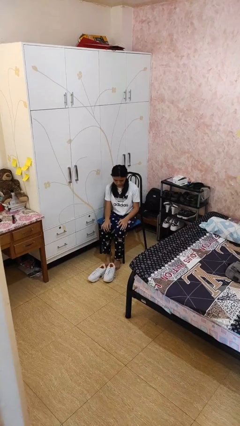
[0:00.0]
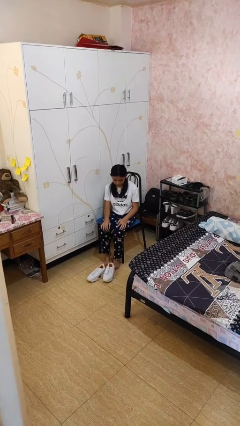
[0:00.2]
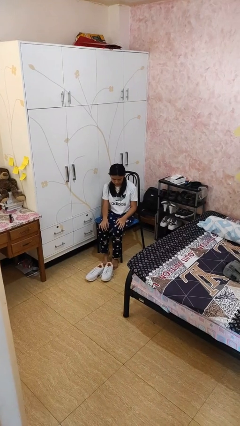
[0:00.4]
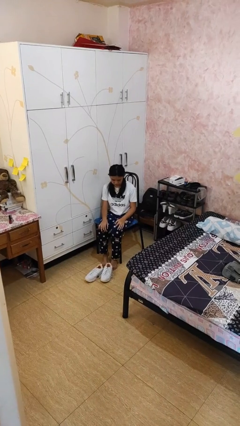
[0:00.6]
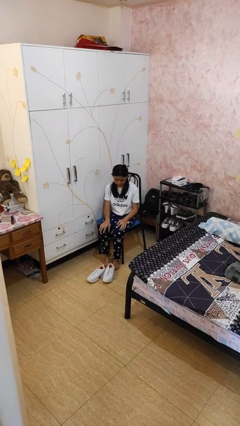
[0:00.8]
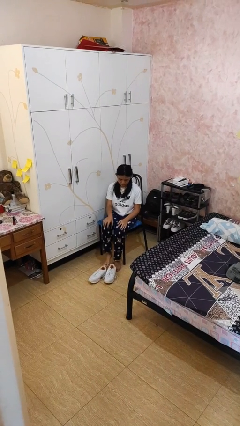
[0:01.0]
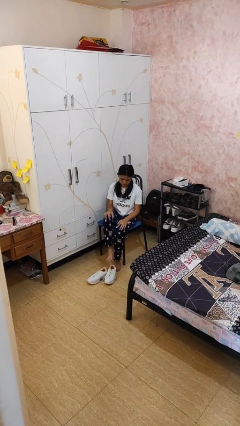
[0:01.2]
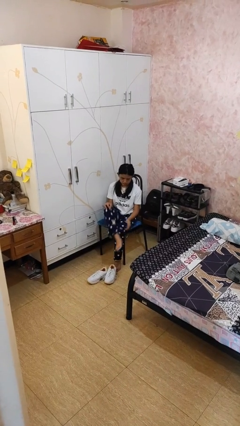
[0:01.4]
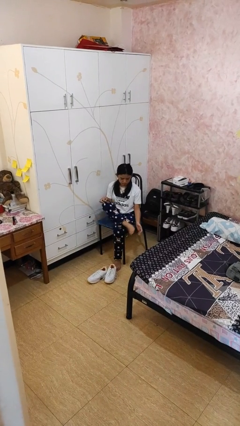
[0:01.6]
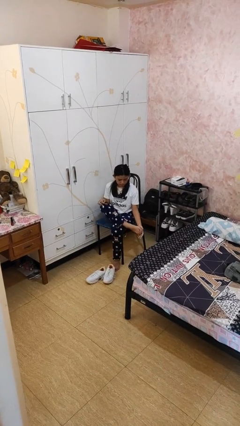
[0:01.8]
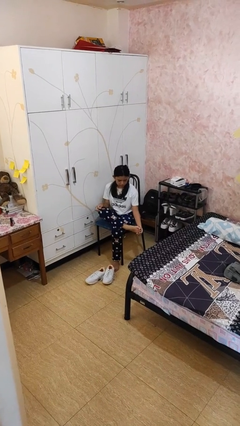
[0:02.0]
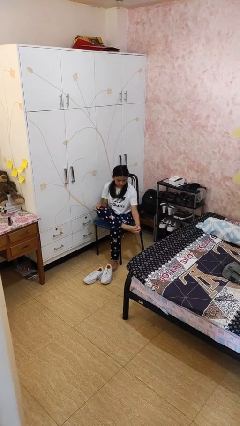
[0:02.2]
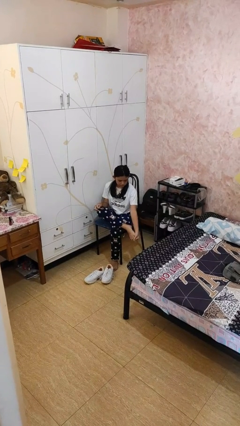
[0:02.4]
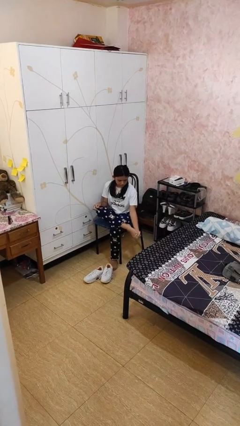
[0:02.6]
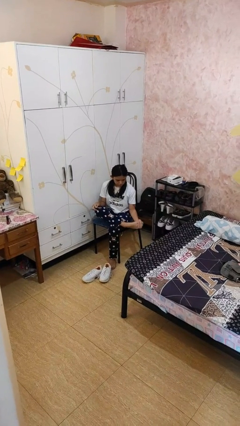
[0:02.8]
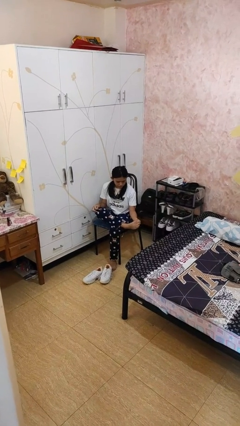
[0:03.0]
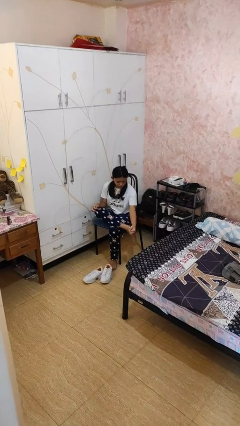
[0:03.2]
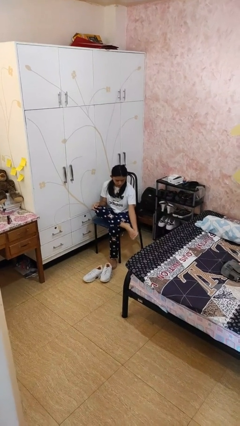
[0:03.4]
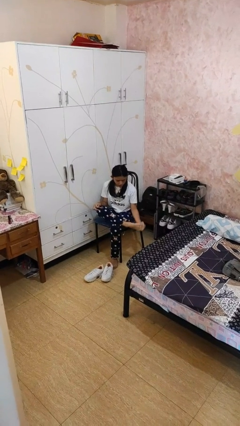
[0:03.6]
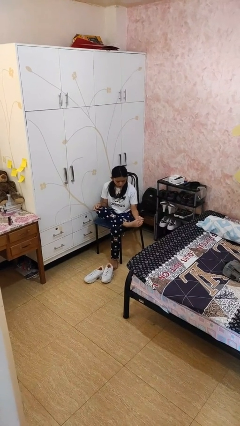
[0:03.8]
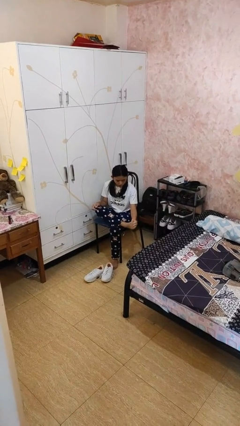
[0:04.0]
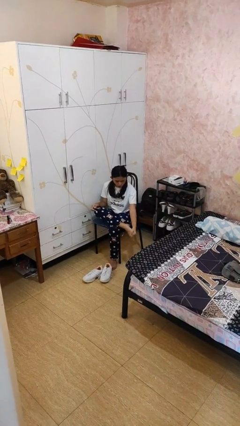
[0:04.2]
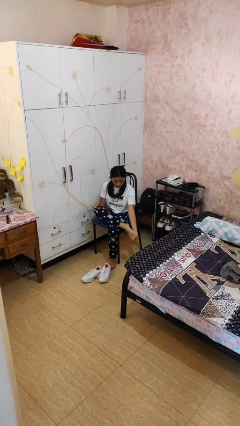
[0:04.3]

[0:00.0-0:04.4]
person rubs foot

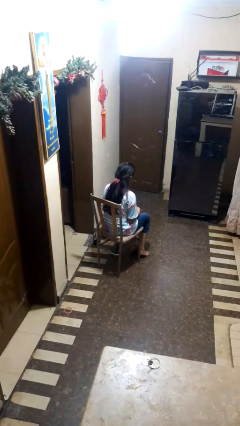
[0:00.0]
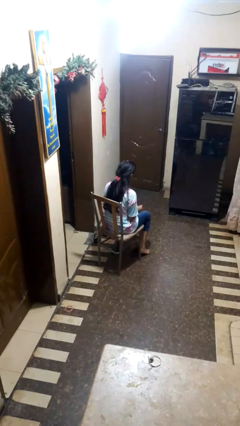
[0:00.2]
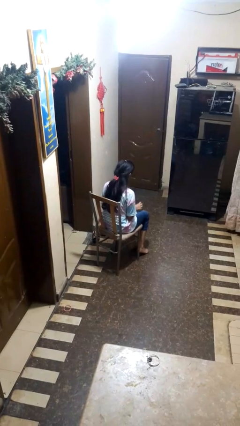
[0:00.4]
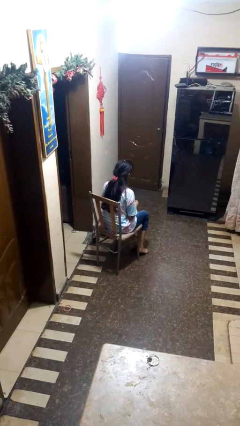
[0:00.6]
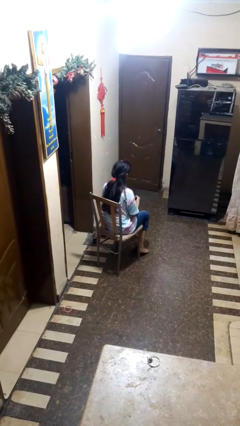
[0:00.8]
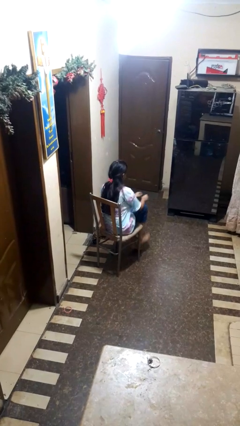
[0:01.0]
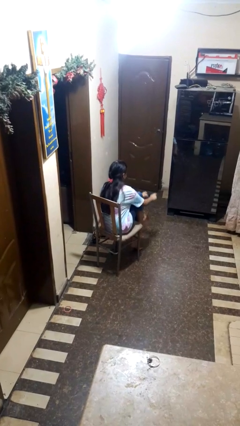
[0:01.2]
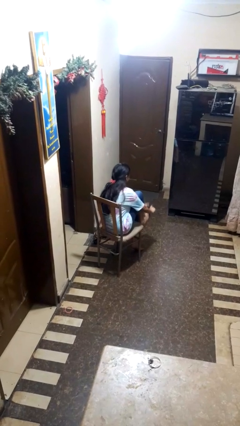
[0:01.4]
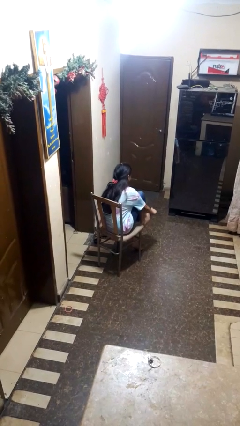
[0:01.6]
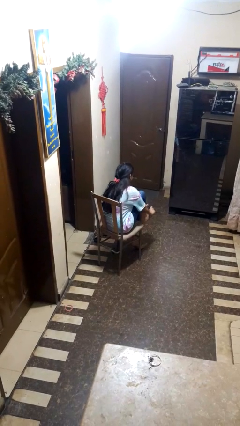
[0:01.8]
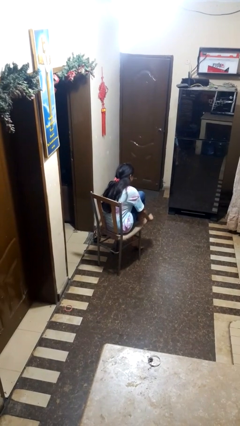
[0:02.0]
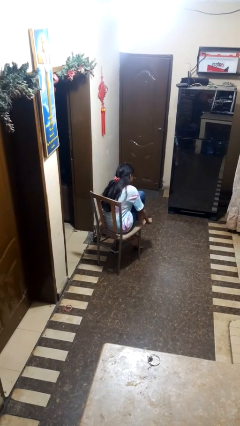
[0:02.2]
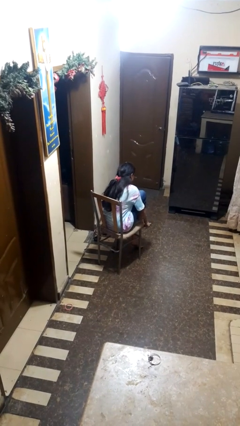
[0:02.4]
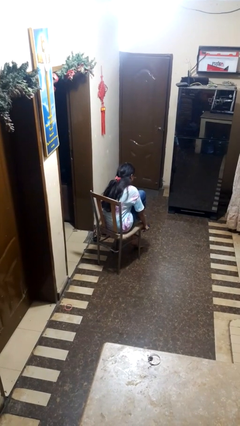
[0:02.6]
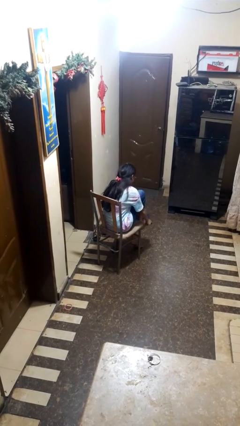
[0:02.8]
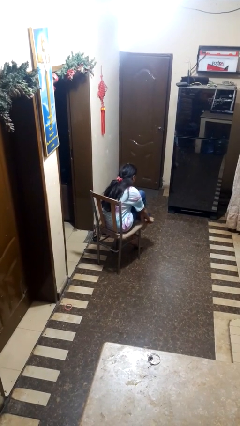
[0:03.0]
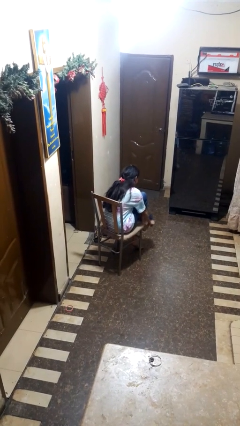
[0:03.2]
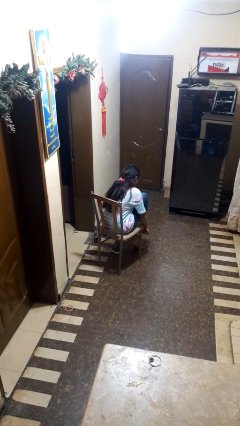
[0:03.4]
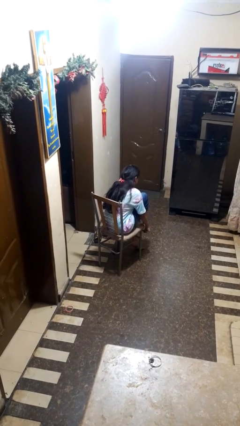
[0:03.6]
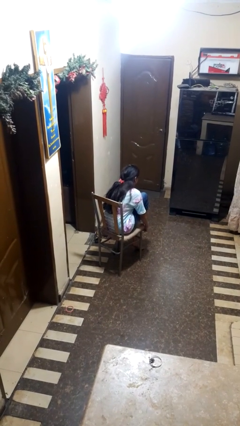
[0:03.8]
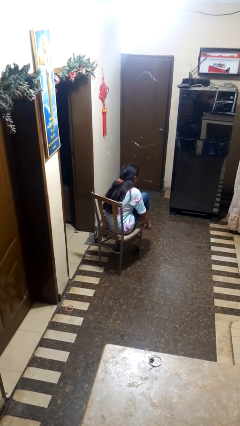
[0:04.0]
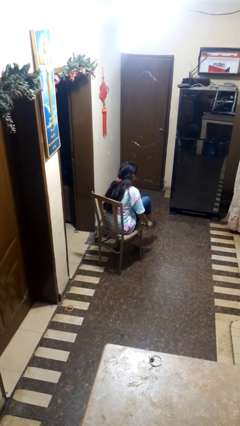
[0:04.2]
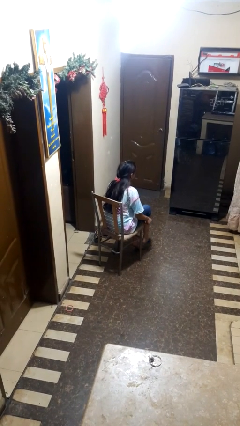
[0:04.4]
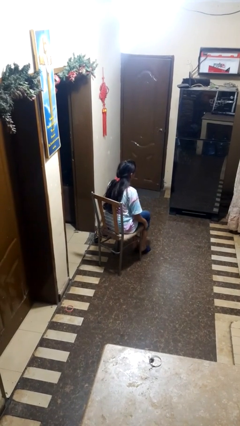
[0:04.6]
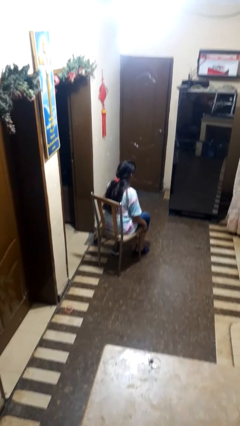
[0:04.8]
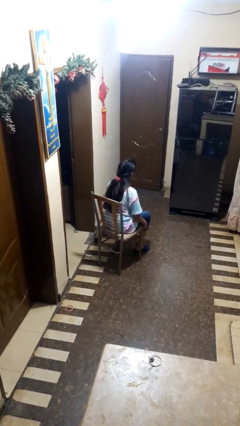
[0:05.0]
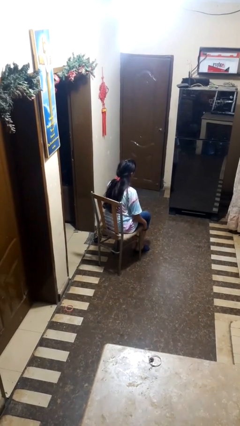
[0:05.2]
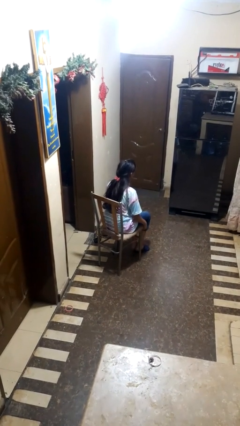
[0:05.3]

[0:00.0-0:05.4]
person puts on socks

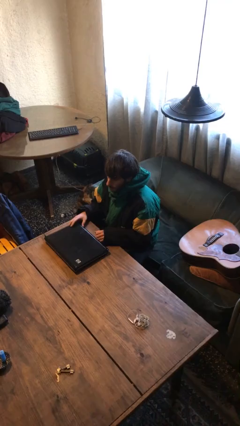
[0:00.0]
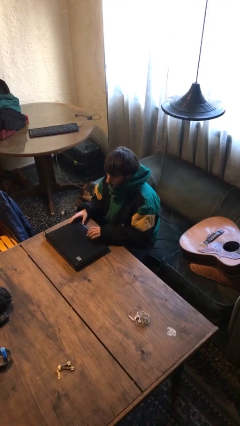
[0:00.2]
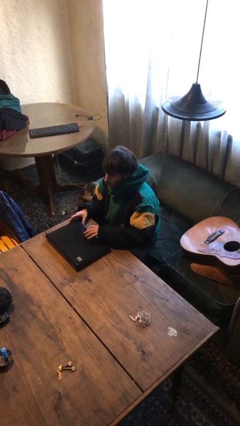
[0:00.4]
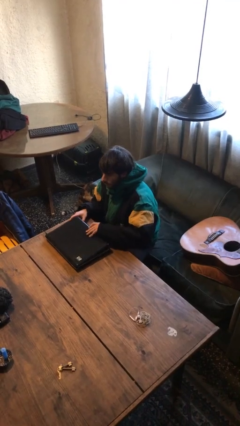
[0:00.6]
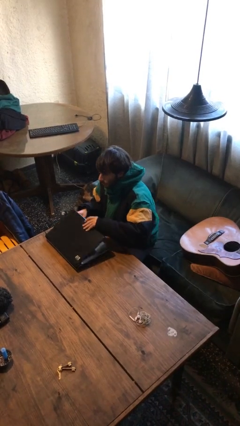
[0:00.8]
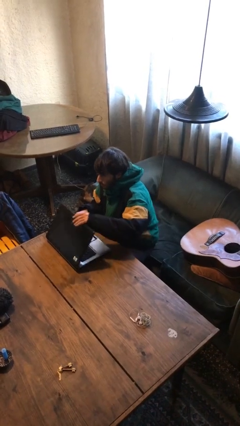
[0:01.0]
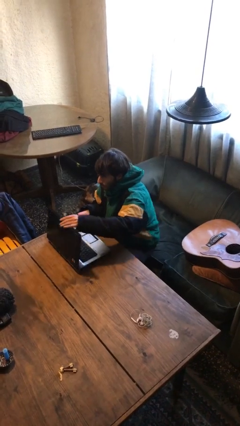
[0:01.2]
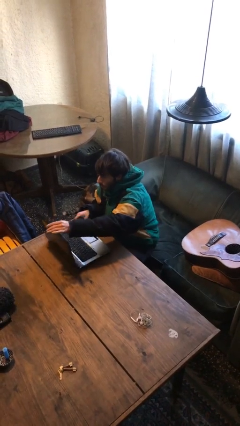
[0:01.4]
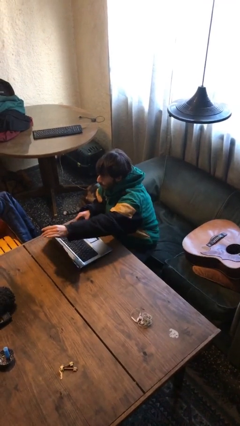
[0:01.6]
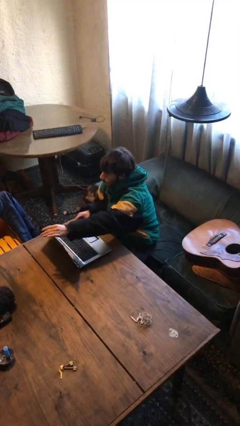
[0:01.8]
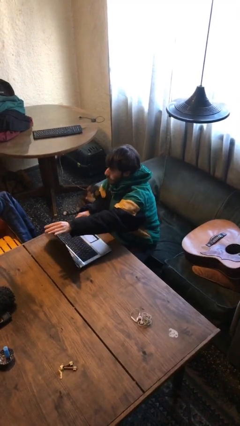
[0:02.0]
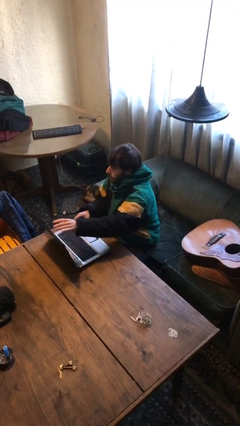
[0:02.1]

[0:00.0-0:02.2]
person opens laptop

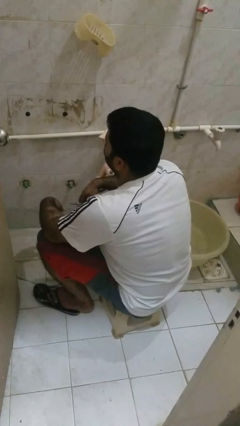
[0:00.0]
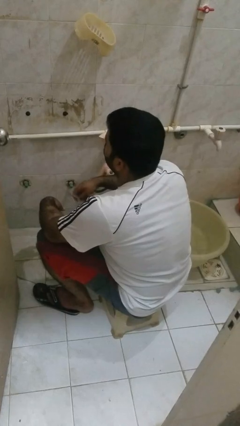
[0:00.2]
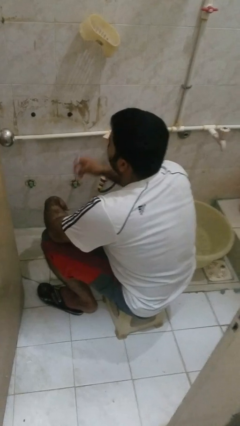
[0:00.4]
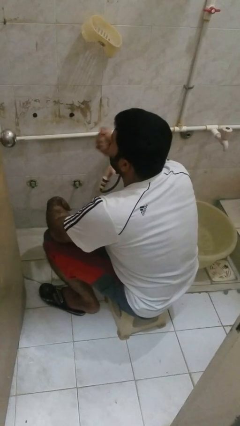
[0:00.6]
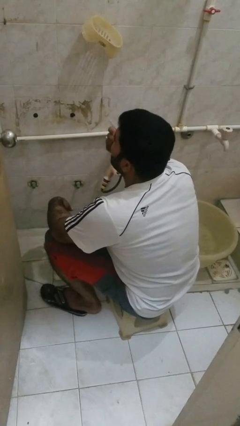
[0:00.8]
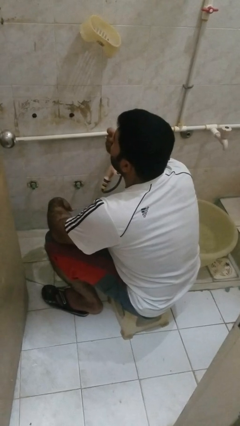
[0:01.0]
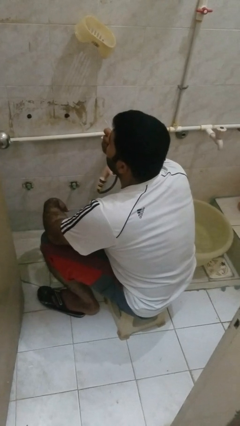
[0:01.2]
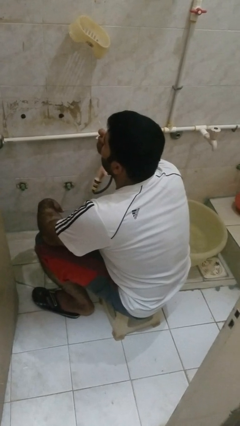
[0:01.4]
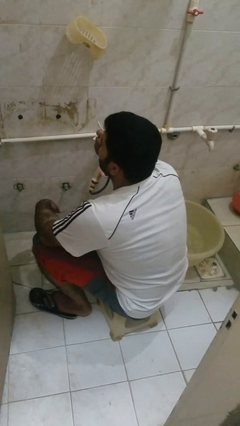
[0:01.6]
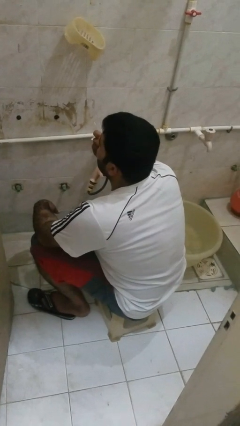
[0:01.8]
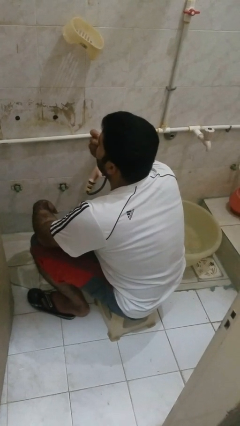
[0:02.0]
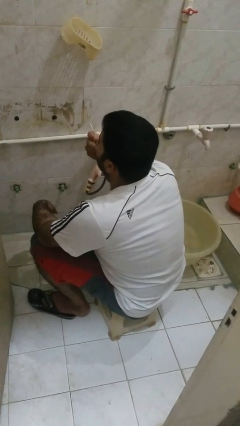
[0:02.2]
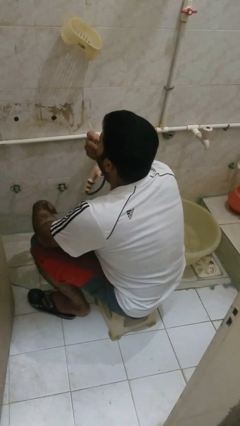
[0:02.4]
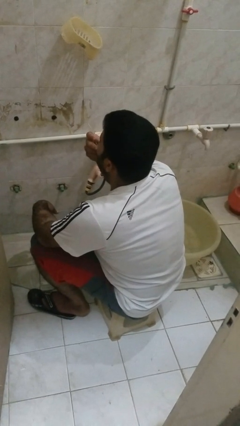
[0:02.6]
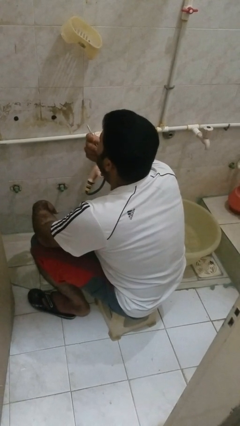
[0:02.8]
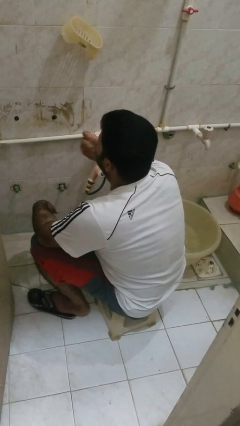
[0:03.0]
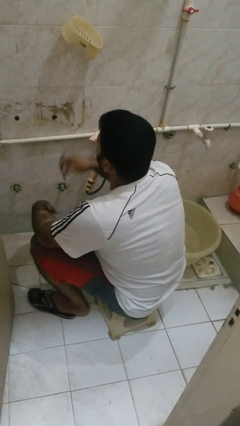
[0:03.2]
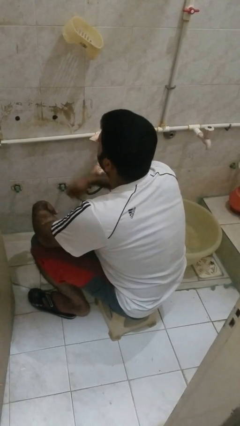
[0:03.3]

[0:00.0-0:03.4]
person flosses

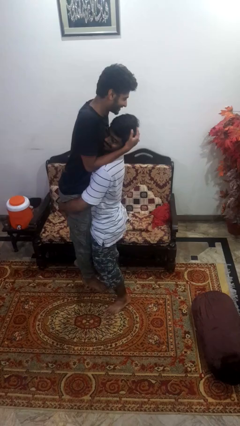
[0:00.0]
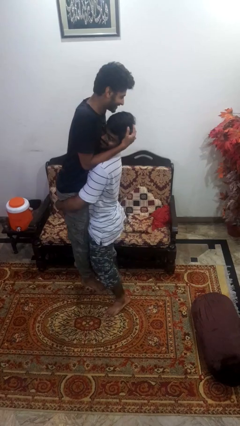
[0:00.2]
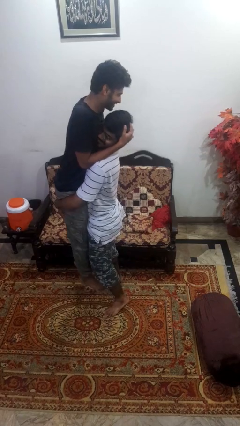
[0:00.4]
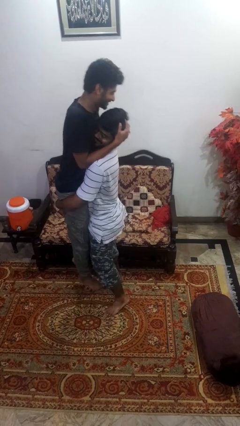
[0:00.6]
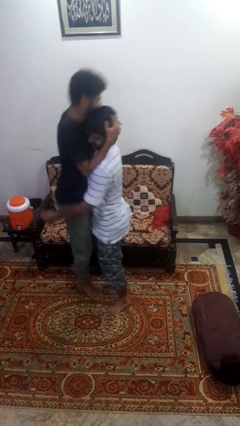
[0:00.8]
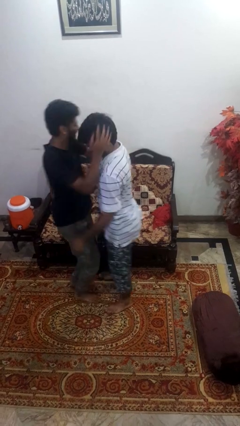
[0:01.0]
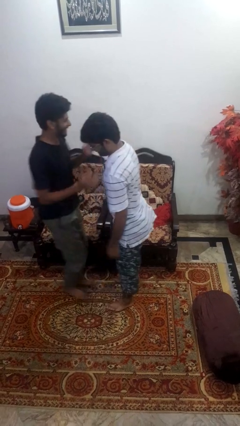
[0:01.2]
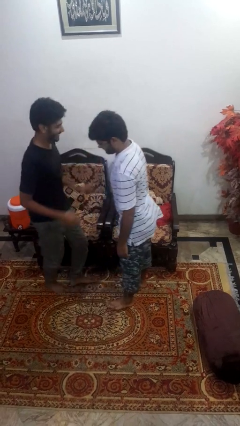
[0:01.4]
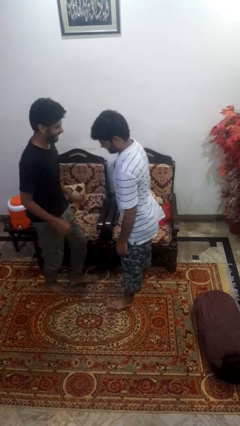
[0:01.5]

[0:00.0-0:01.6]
person puts down person

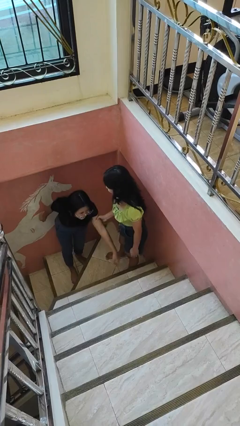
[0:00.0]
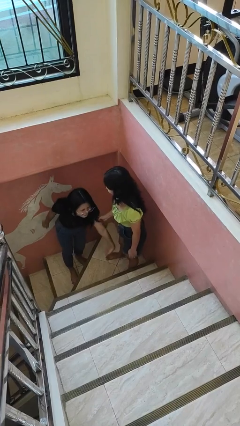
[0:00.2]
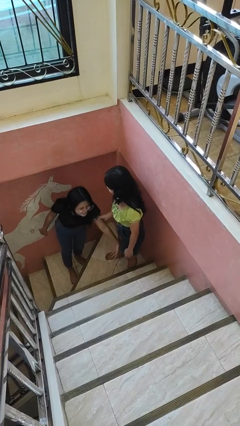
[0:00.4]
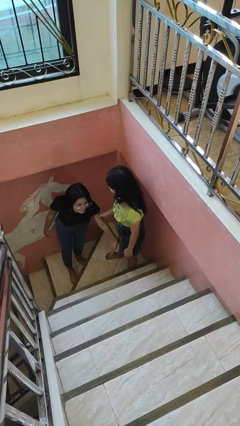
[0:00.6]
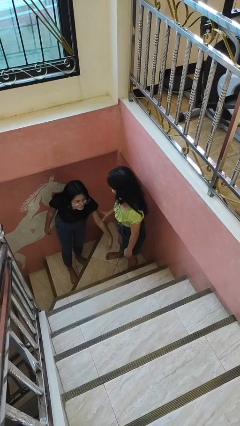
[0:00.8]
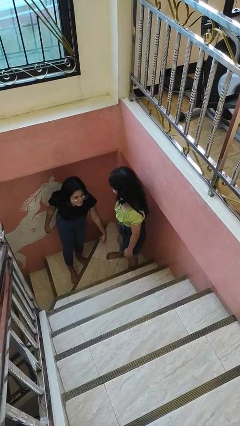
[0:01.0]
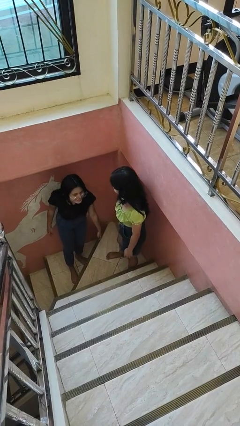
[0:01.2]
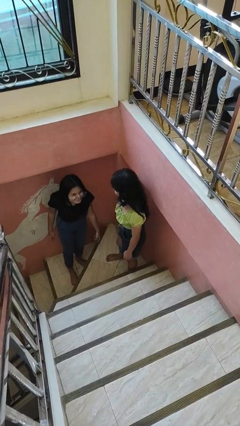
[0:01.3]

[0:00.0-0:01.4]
person grabs person by bicep
